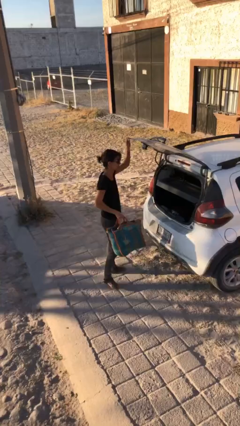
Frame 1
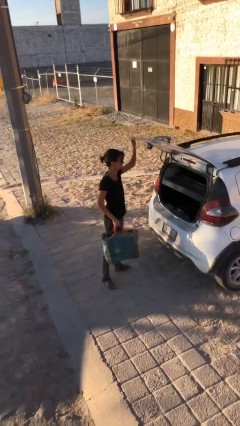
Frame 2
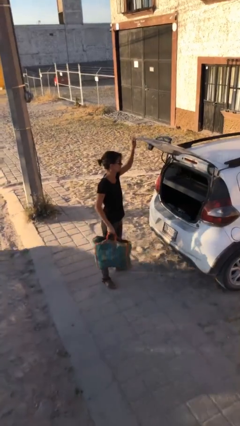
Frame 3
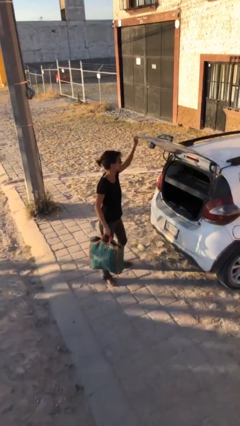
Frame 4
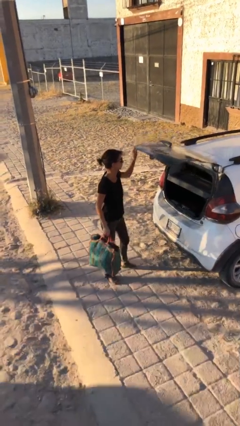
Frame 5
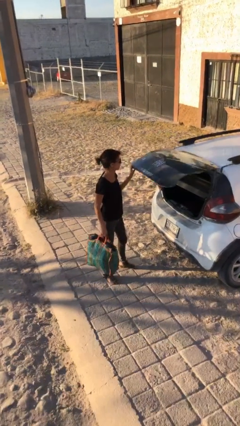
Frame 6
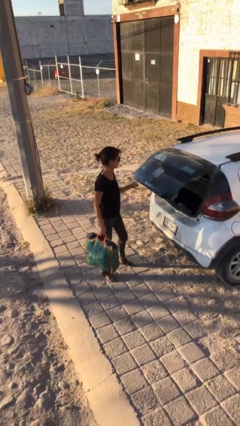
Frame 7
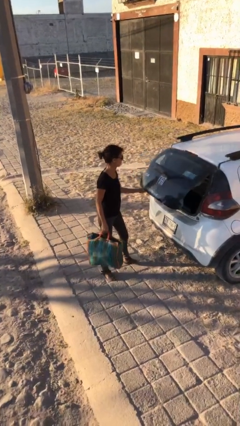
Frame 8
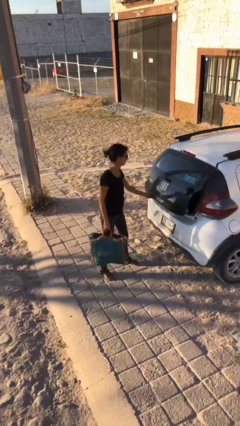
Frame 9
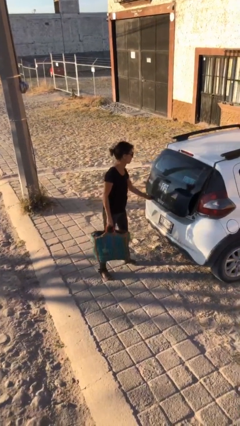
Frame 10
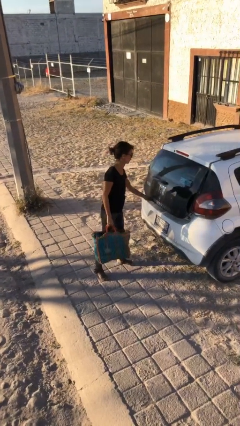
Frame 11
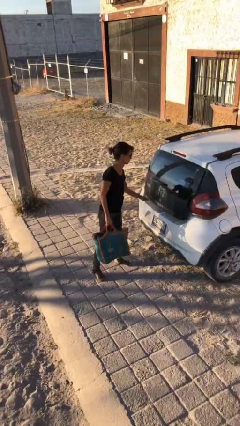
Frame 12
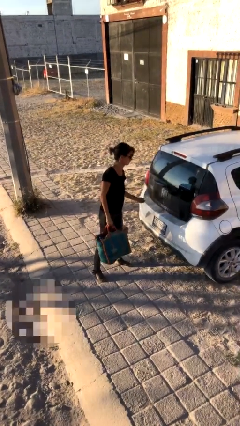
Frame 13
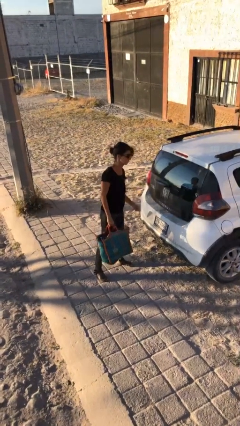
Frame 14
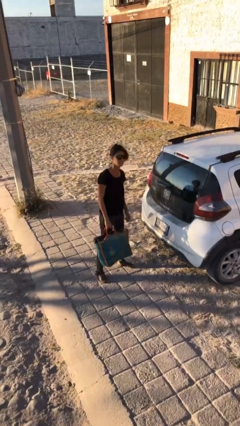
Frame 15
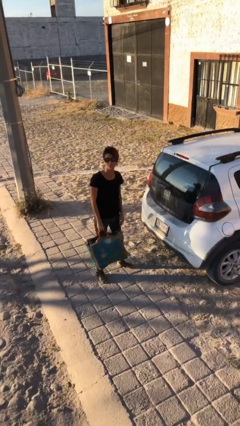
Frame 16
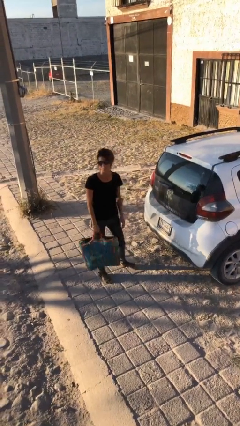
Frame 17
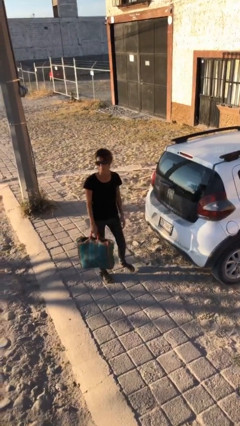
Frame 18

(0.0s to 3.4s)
person closes car trunk

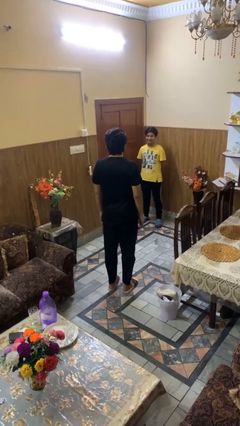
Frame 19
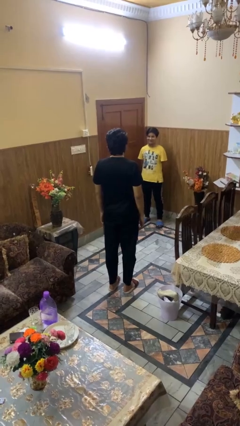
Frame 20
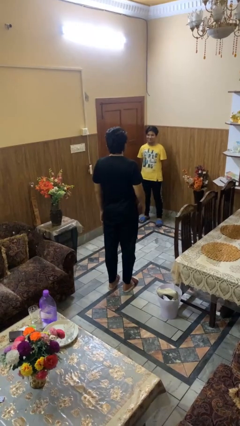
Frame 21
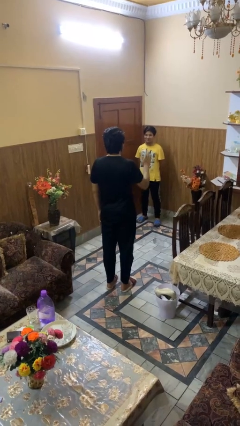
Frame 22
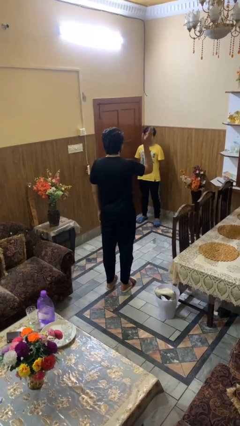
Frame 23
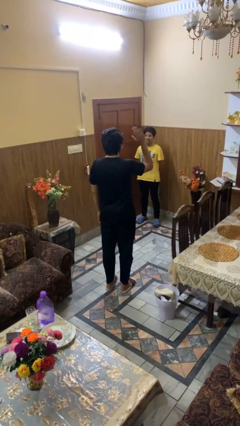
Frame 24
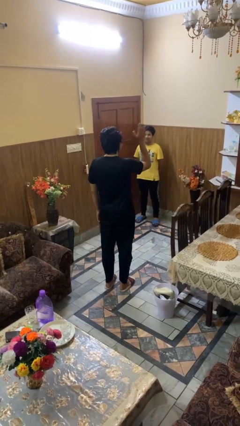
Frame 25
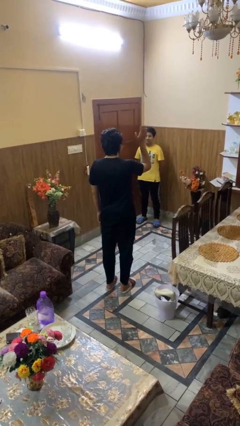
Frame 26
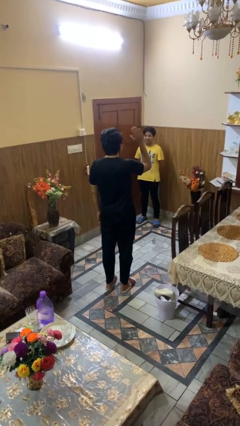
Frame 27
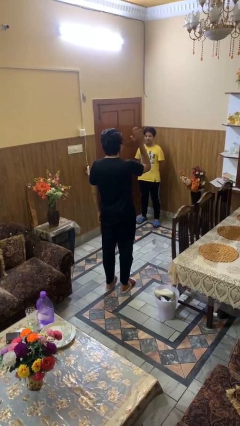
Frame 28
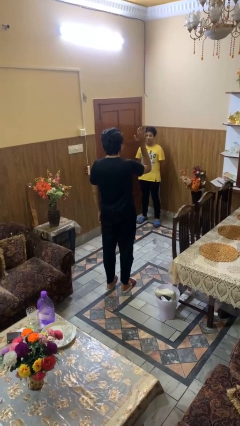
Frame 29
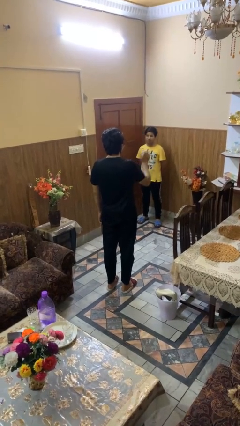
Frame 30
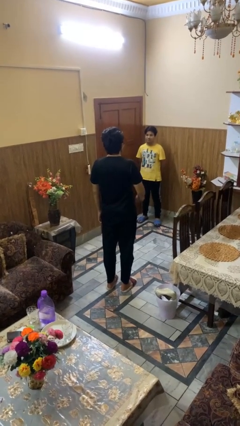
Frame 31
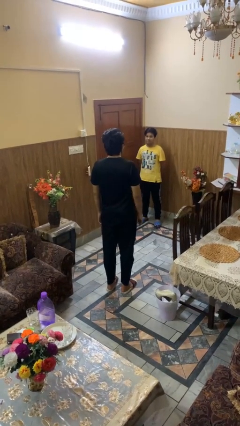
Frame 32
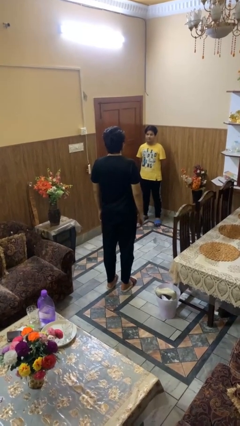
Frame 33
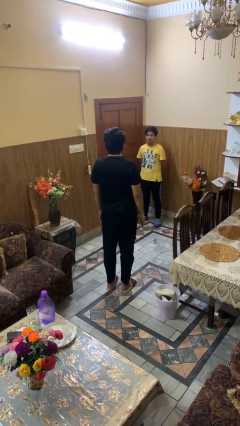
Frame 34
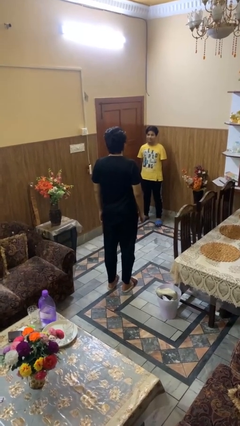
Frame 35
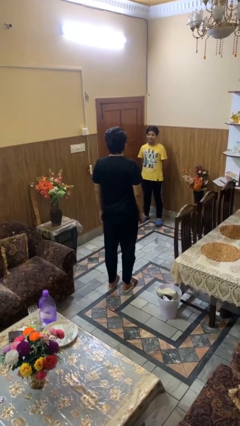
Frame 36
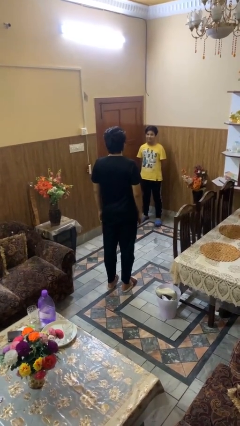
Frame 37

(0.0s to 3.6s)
person waves at person

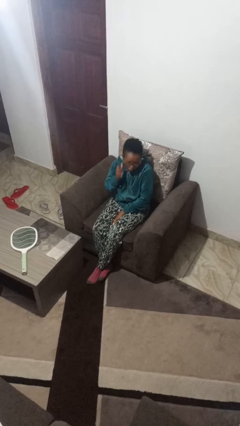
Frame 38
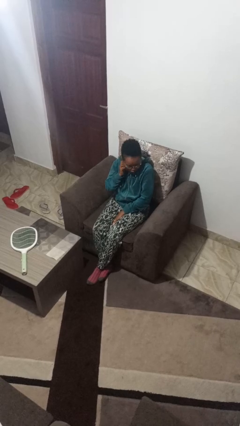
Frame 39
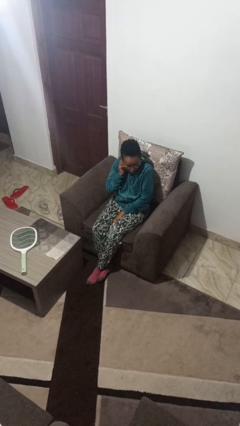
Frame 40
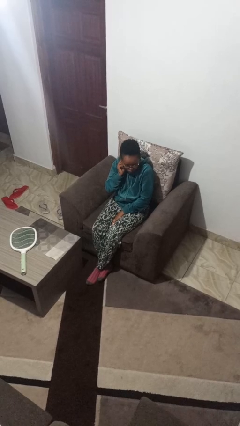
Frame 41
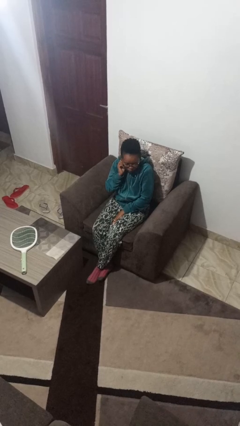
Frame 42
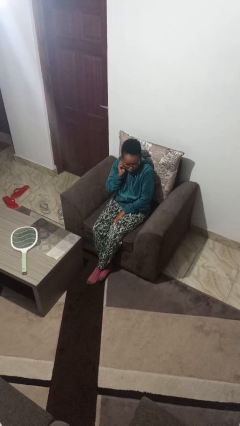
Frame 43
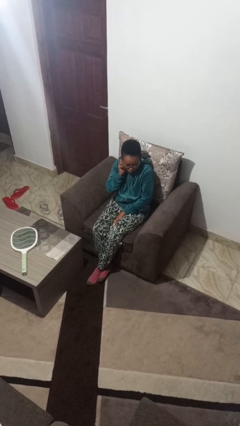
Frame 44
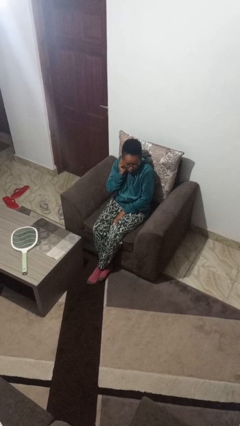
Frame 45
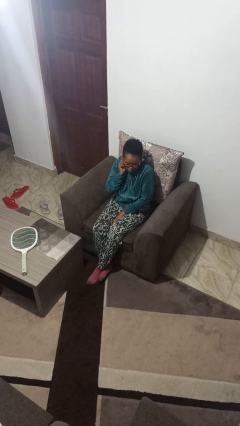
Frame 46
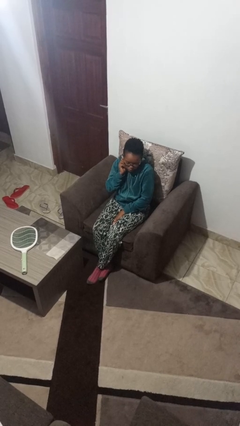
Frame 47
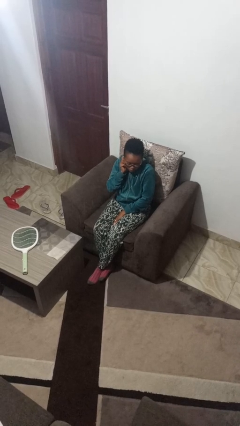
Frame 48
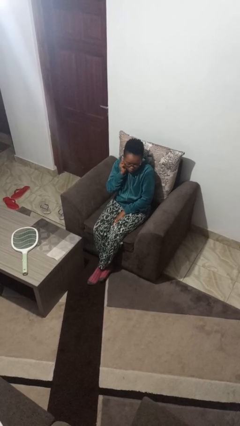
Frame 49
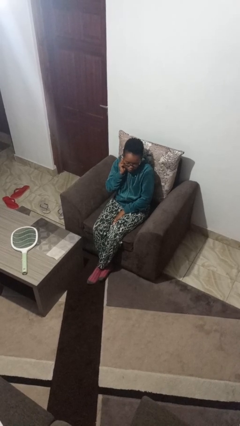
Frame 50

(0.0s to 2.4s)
person touches earlobe

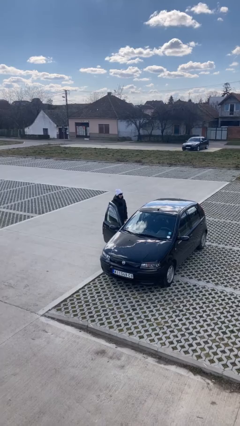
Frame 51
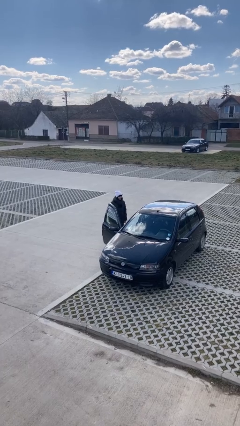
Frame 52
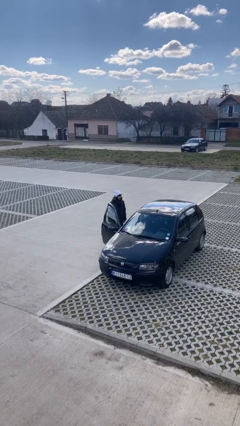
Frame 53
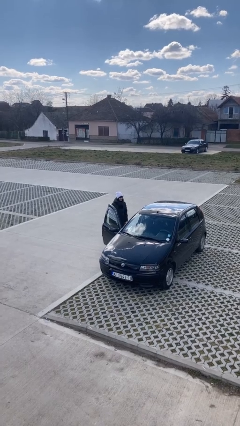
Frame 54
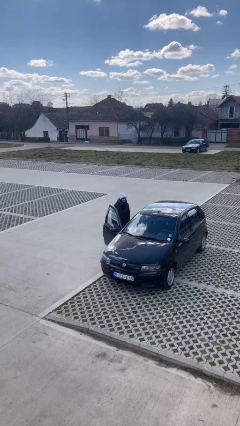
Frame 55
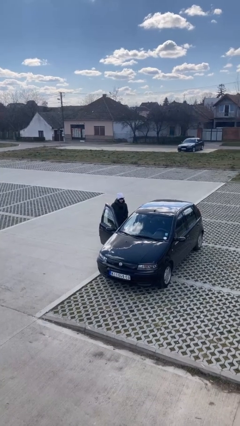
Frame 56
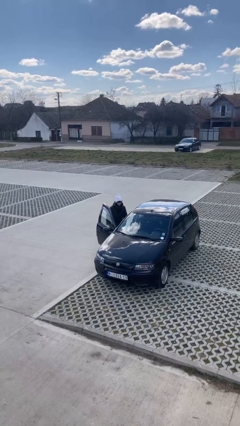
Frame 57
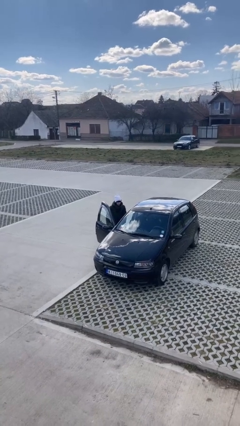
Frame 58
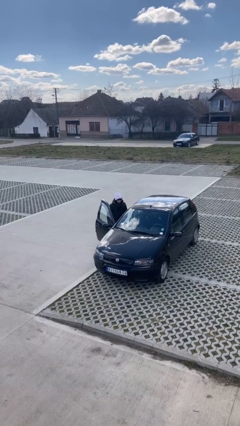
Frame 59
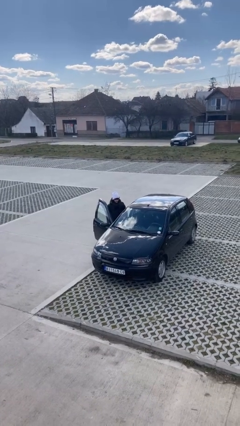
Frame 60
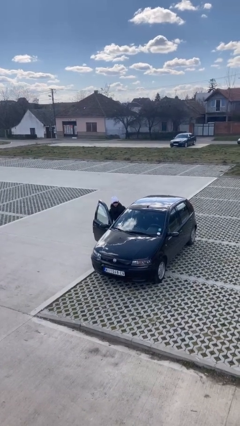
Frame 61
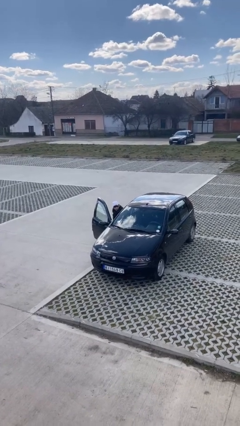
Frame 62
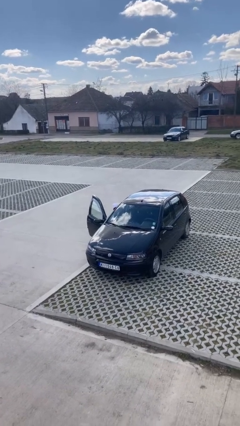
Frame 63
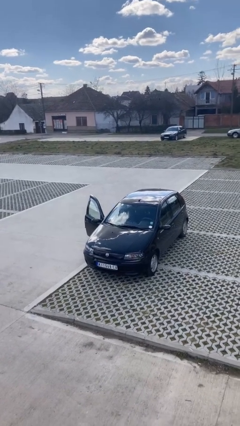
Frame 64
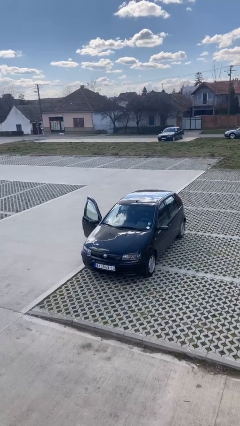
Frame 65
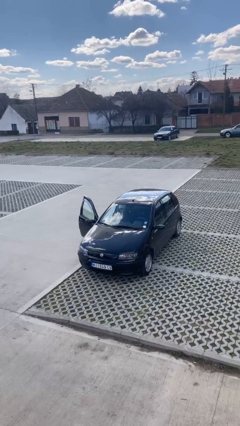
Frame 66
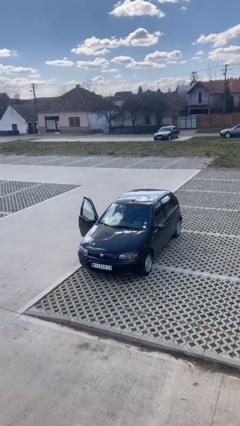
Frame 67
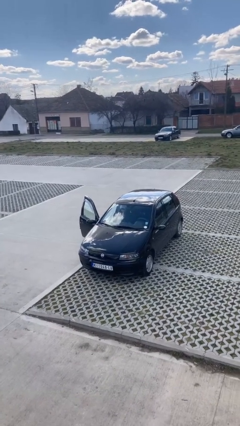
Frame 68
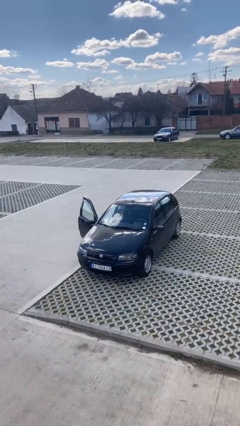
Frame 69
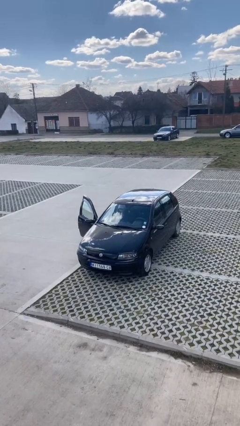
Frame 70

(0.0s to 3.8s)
person enters car

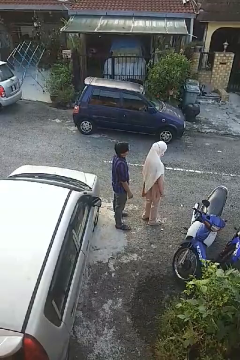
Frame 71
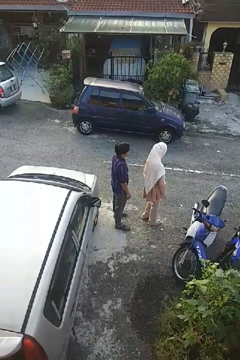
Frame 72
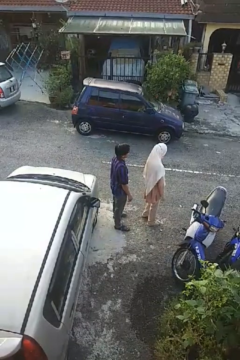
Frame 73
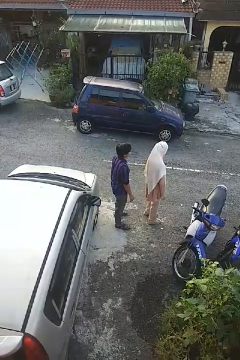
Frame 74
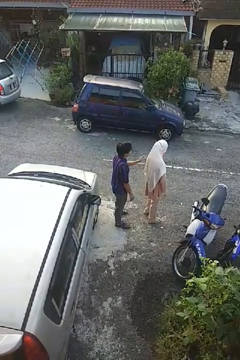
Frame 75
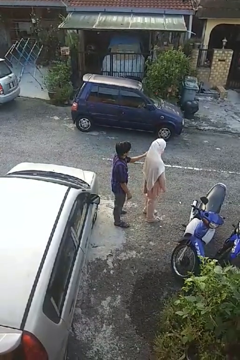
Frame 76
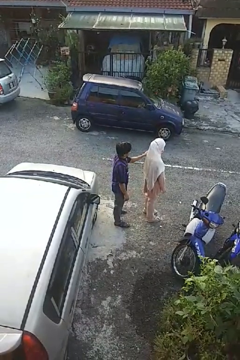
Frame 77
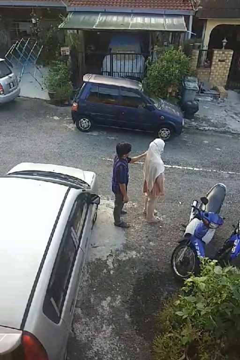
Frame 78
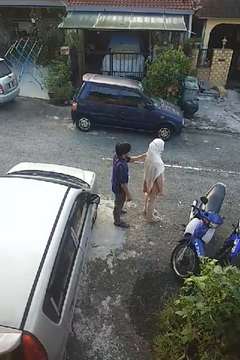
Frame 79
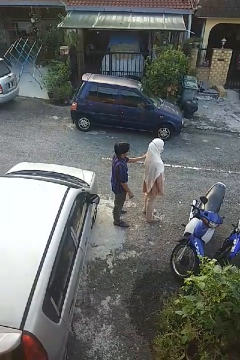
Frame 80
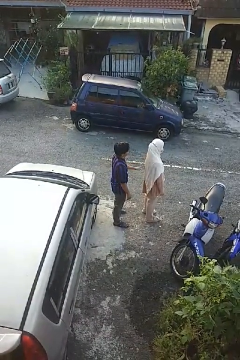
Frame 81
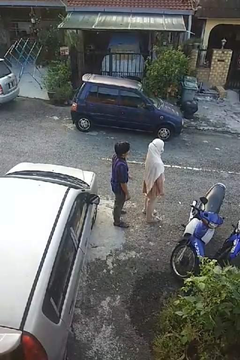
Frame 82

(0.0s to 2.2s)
person touches back of person

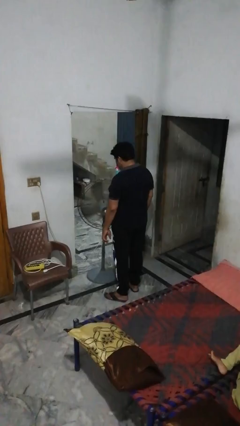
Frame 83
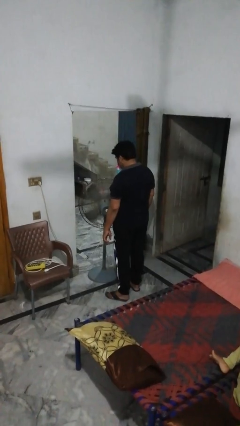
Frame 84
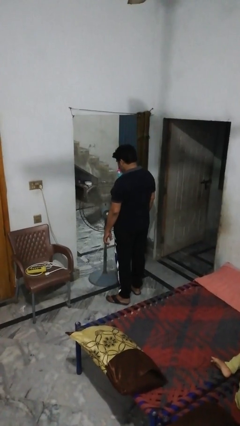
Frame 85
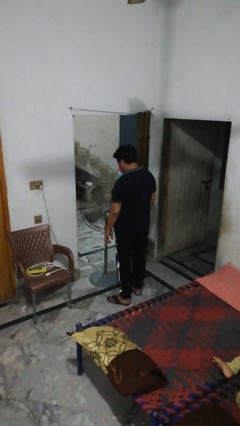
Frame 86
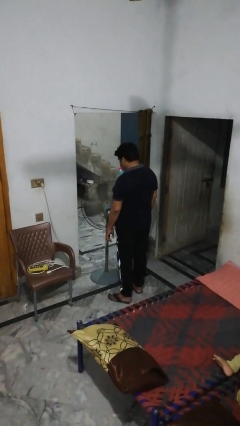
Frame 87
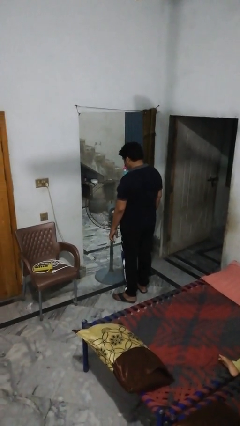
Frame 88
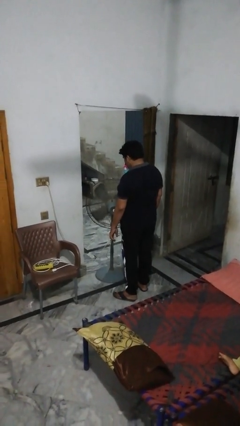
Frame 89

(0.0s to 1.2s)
person turns off fan

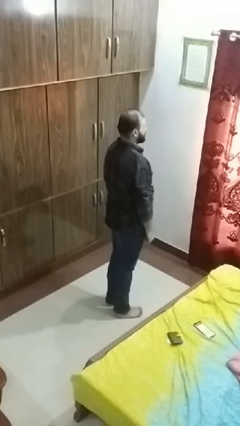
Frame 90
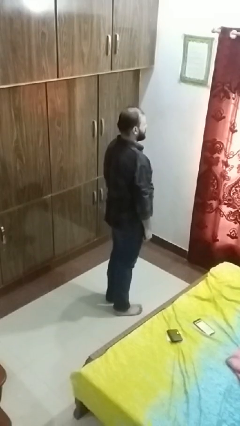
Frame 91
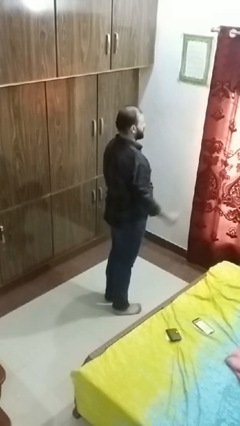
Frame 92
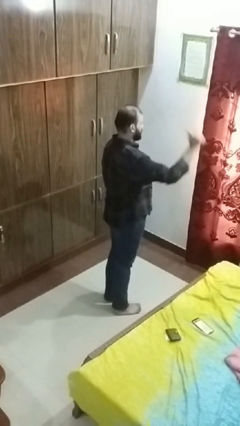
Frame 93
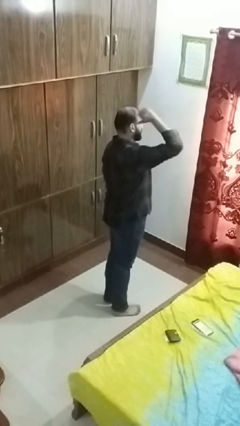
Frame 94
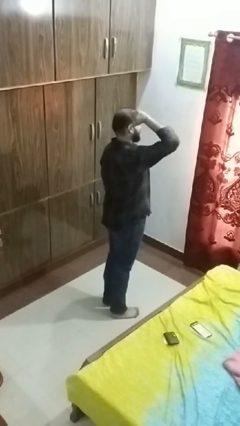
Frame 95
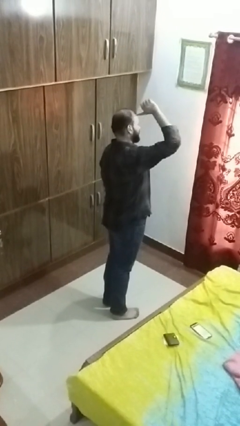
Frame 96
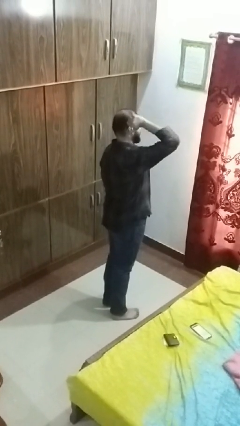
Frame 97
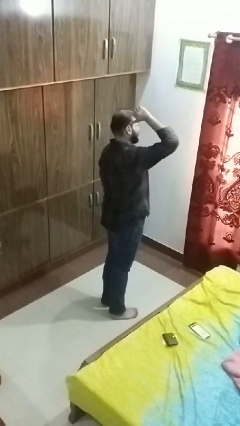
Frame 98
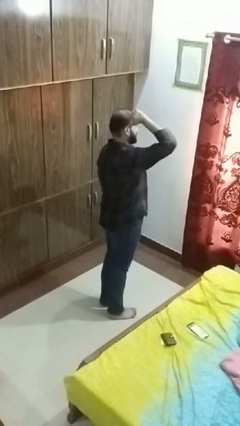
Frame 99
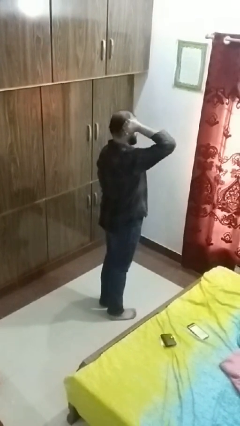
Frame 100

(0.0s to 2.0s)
person gestures behind me
